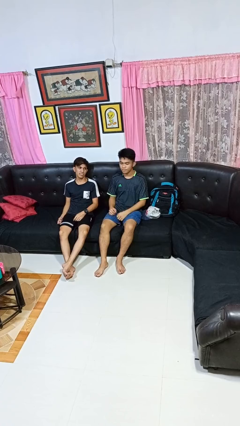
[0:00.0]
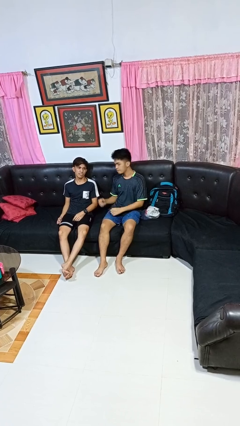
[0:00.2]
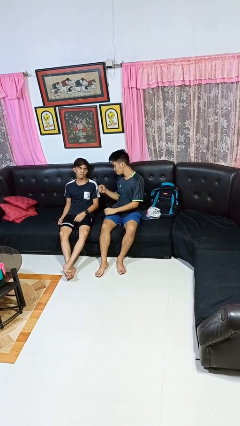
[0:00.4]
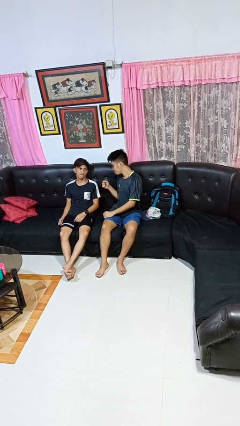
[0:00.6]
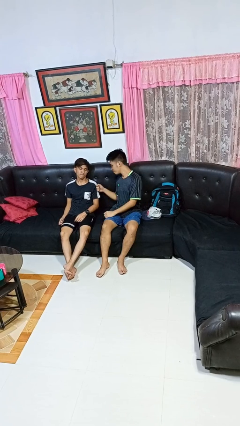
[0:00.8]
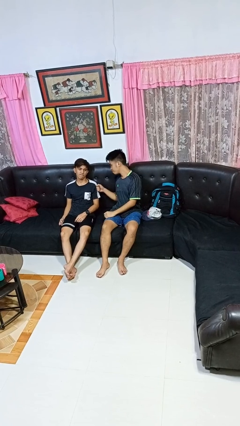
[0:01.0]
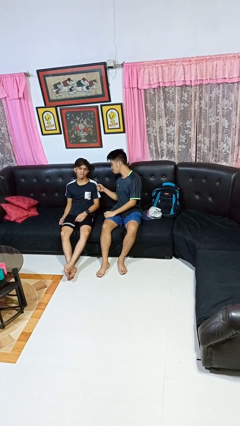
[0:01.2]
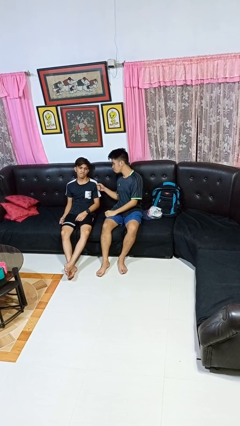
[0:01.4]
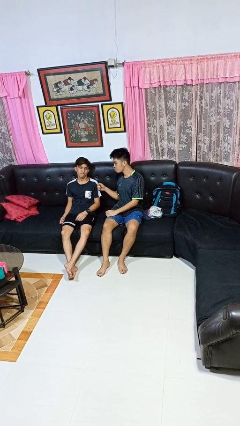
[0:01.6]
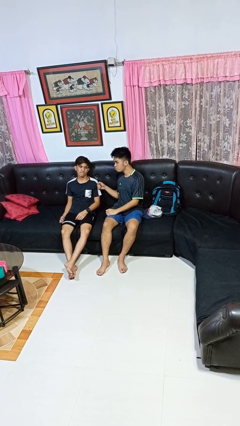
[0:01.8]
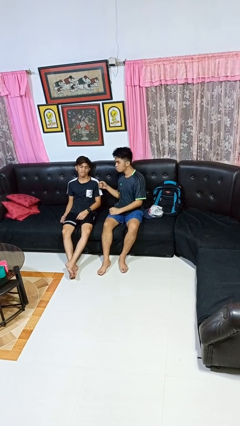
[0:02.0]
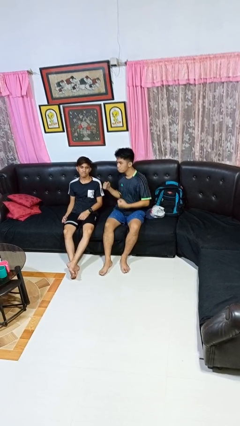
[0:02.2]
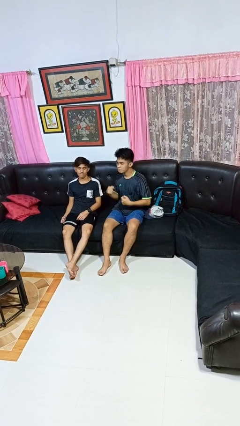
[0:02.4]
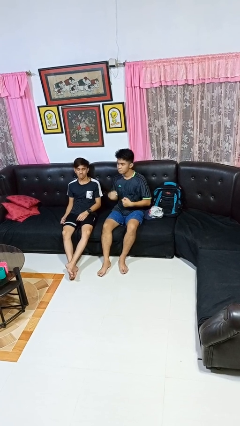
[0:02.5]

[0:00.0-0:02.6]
person pounds shoulders of person

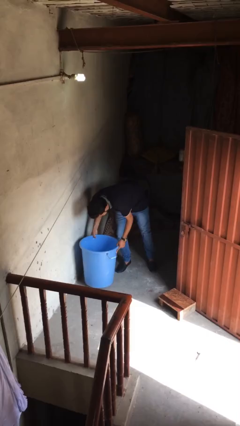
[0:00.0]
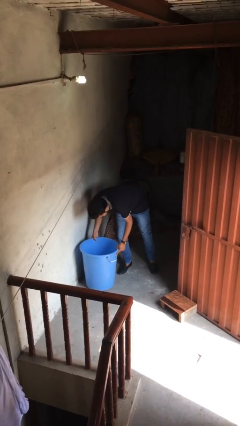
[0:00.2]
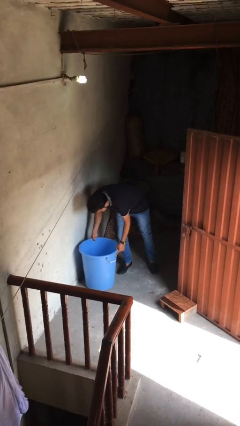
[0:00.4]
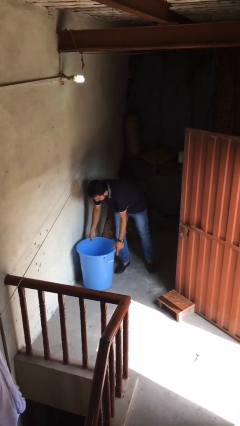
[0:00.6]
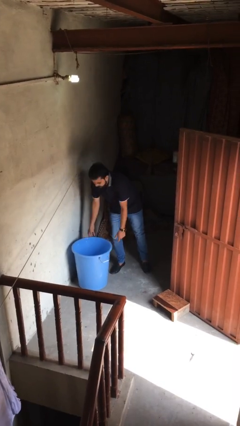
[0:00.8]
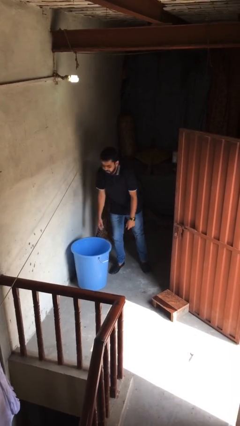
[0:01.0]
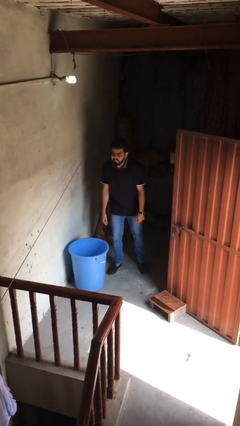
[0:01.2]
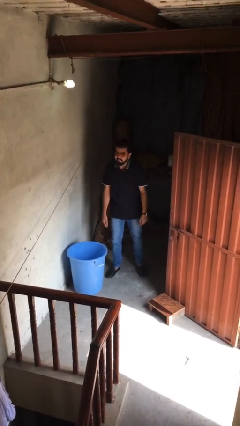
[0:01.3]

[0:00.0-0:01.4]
person puts down object on floor

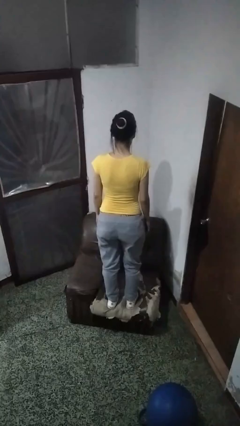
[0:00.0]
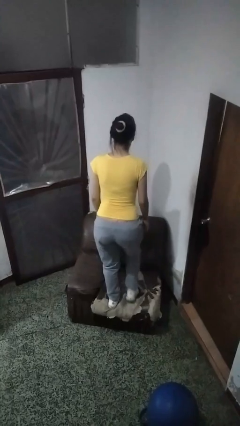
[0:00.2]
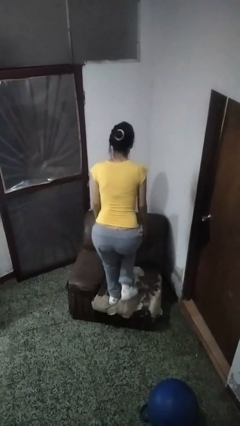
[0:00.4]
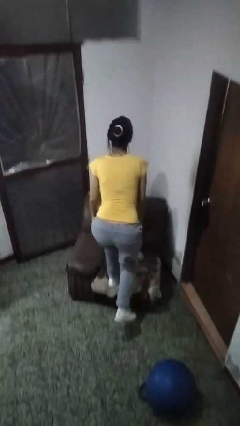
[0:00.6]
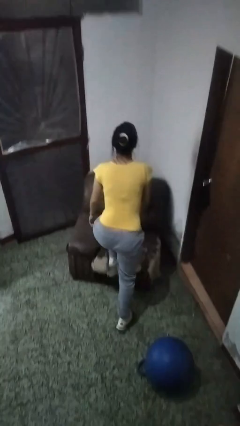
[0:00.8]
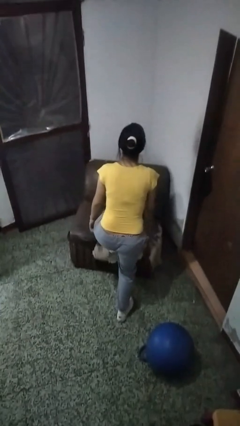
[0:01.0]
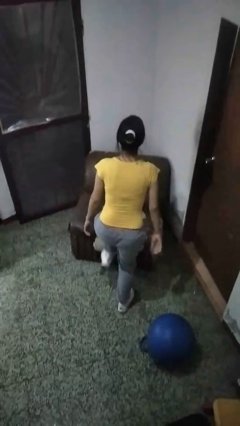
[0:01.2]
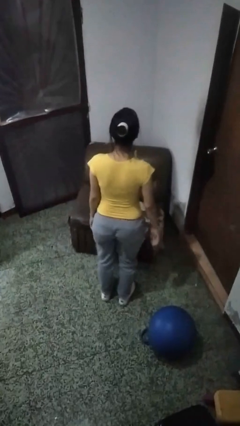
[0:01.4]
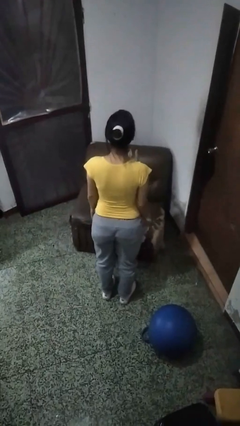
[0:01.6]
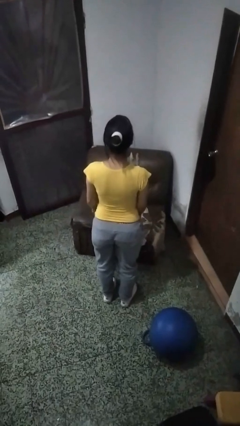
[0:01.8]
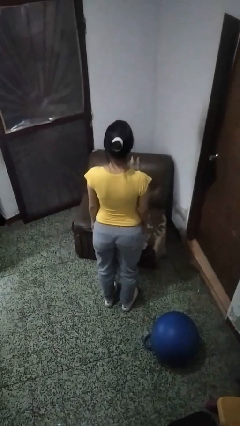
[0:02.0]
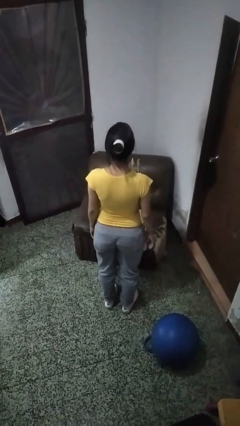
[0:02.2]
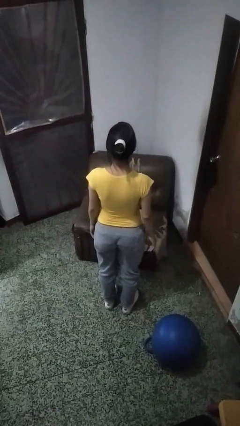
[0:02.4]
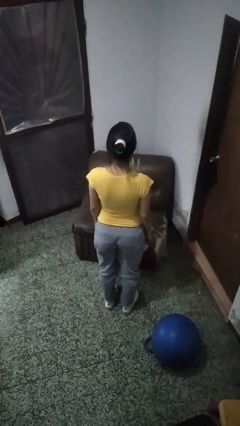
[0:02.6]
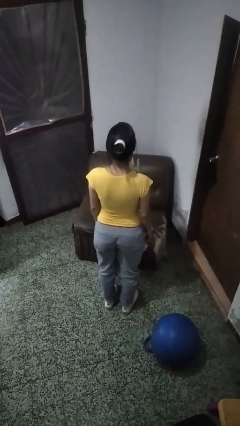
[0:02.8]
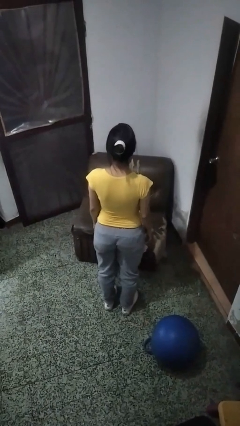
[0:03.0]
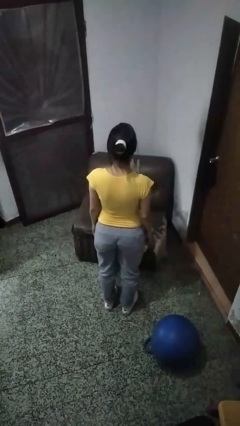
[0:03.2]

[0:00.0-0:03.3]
person climbs off couch

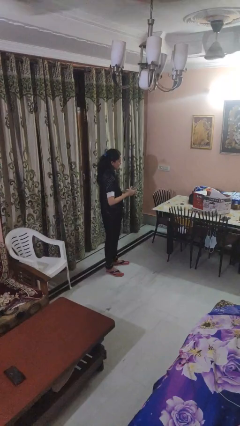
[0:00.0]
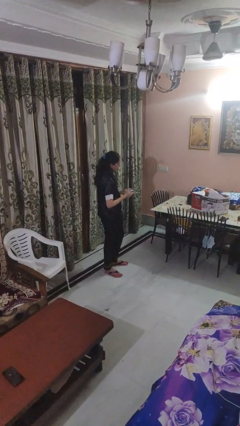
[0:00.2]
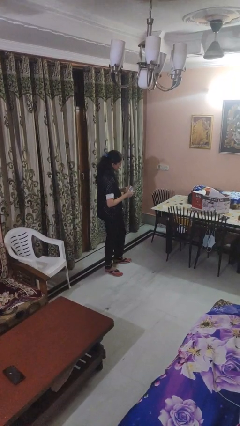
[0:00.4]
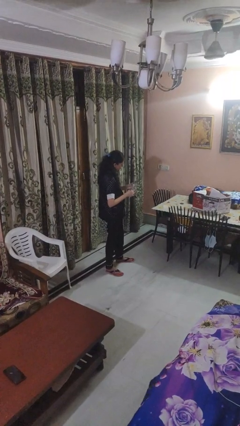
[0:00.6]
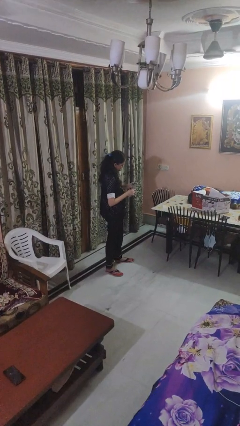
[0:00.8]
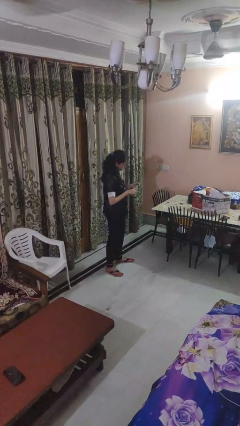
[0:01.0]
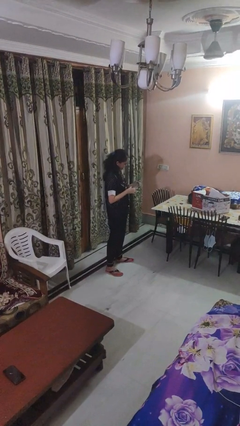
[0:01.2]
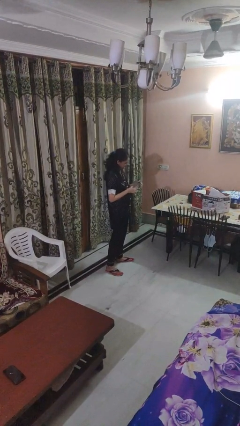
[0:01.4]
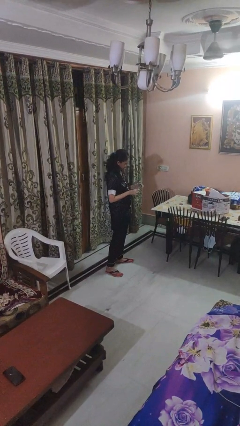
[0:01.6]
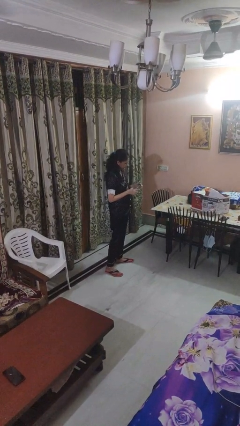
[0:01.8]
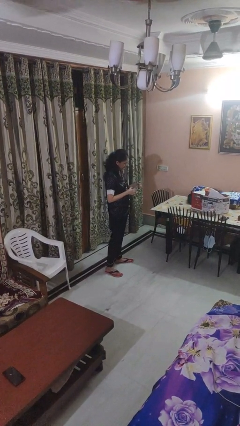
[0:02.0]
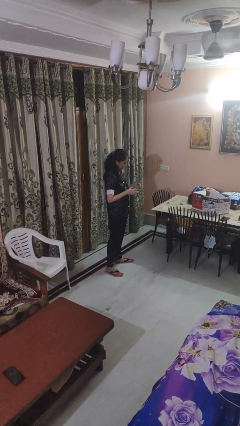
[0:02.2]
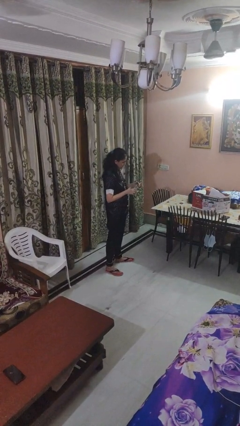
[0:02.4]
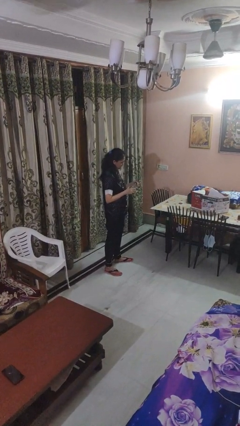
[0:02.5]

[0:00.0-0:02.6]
person screws lid to bottle

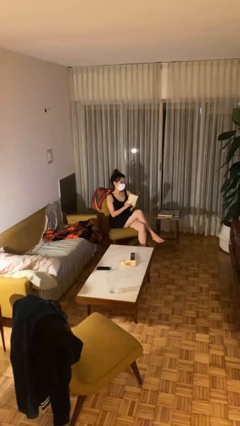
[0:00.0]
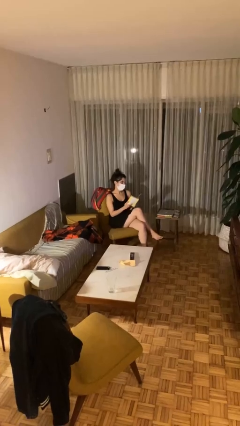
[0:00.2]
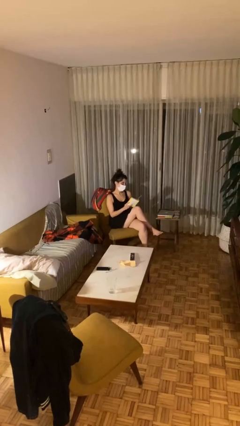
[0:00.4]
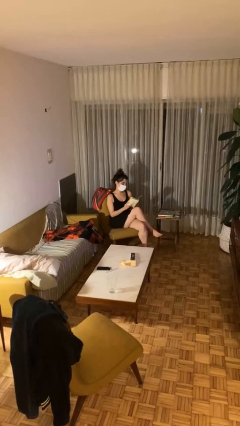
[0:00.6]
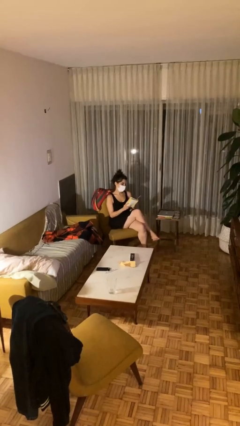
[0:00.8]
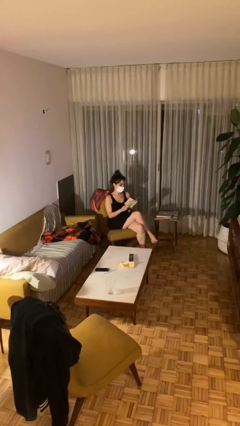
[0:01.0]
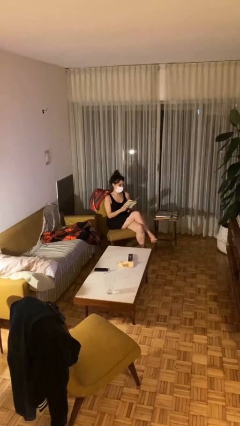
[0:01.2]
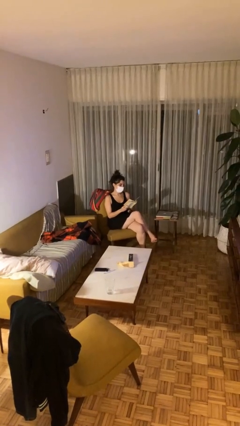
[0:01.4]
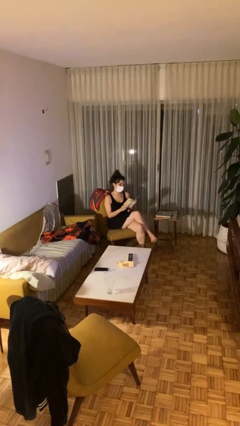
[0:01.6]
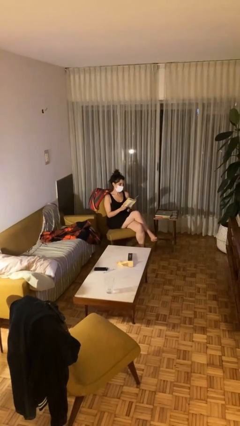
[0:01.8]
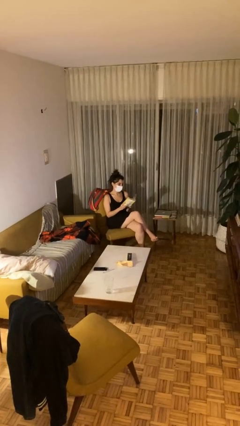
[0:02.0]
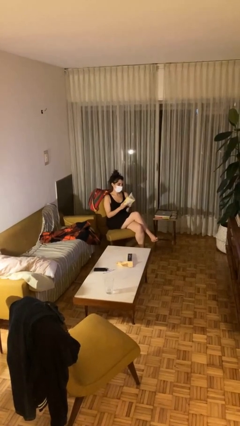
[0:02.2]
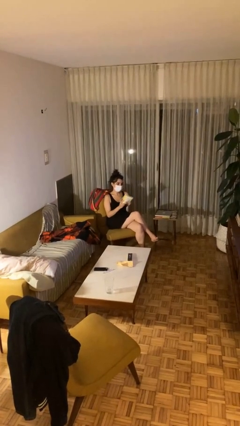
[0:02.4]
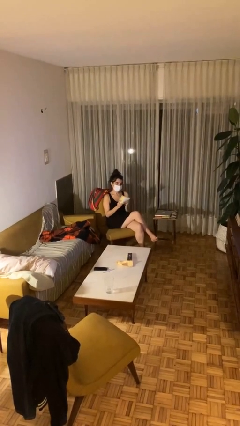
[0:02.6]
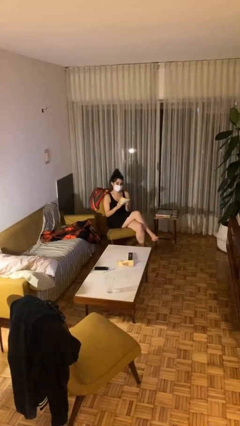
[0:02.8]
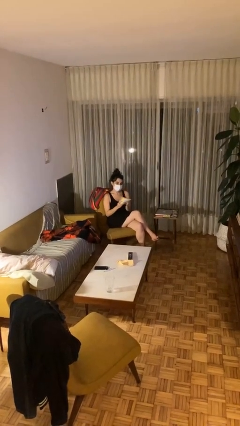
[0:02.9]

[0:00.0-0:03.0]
person reads document

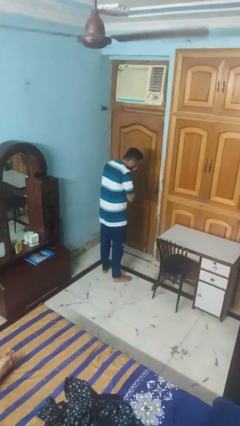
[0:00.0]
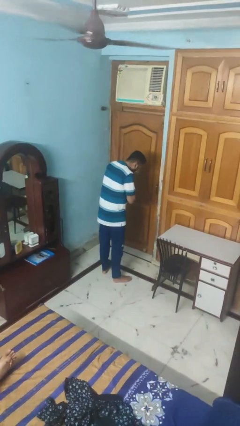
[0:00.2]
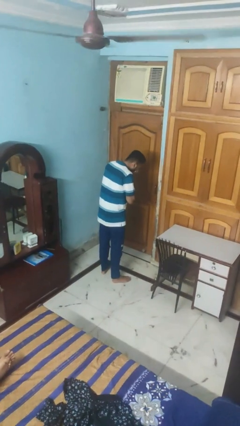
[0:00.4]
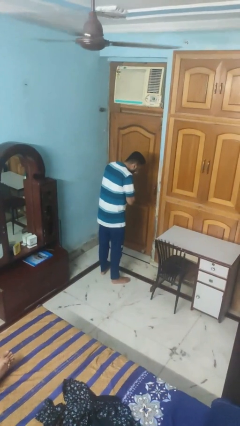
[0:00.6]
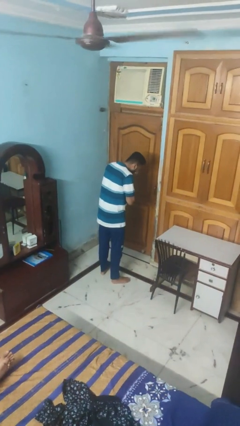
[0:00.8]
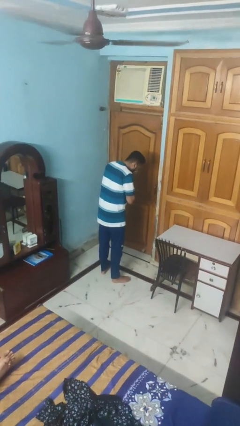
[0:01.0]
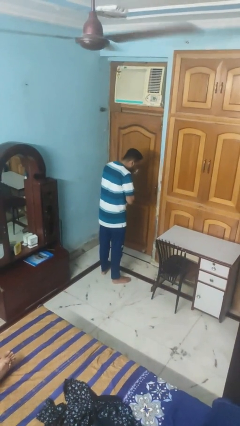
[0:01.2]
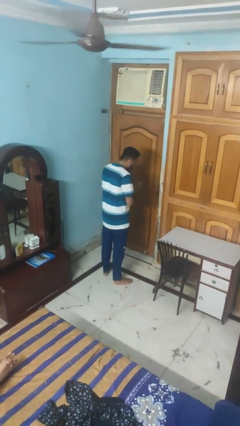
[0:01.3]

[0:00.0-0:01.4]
person sneezes into hand

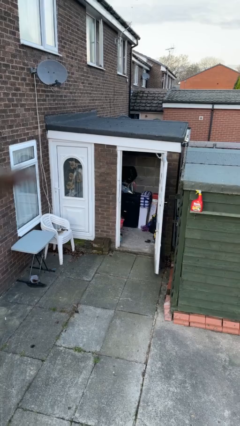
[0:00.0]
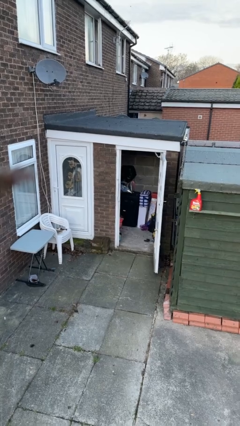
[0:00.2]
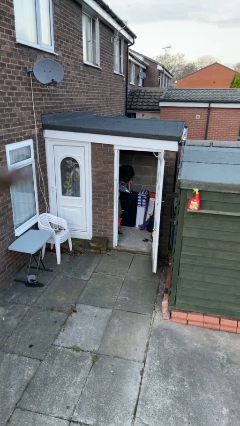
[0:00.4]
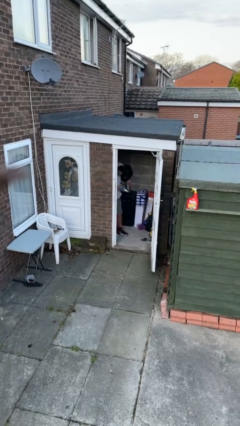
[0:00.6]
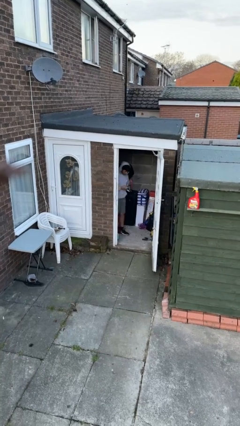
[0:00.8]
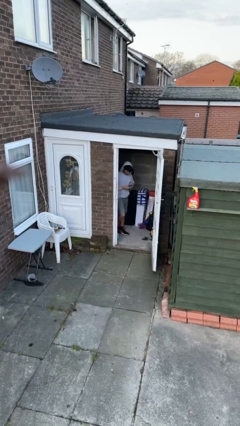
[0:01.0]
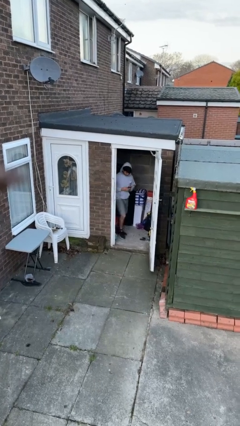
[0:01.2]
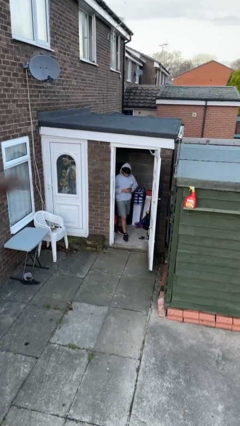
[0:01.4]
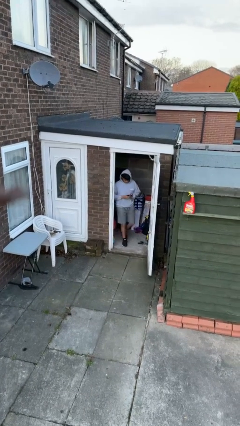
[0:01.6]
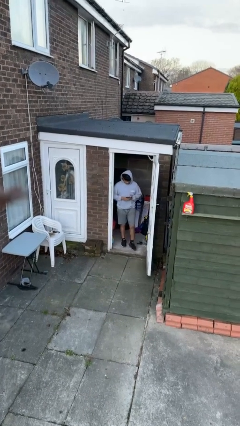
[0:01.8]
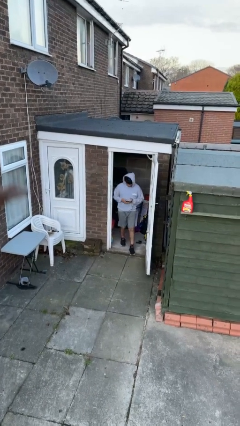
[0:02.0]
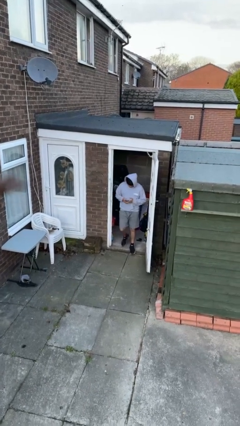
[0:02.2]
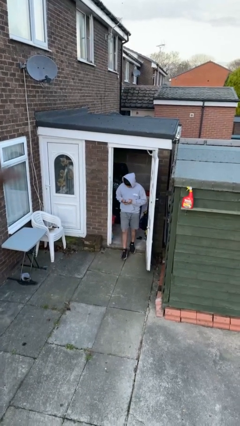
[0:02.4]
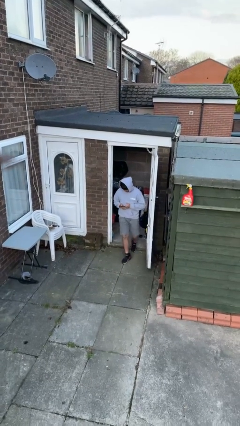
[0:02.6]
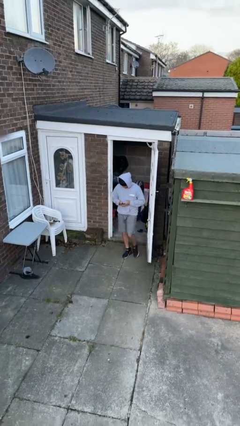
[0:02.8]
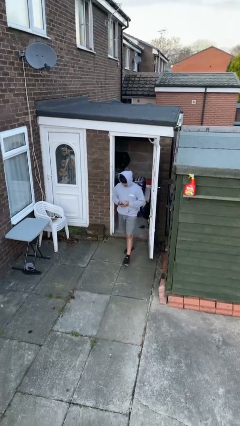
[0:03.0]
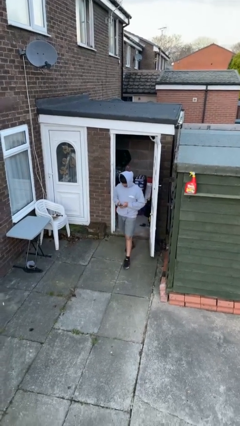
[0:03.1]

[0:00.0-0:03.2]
person enters scene through structure
